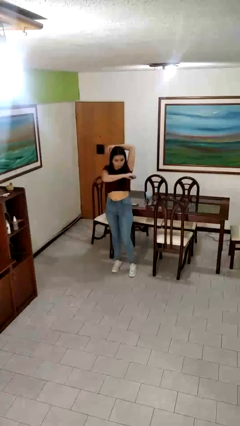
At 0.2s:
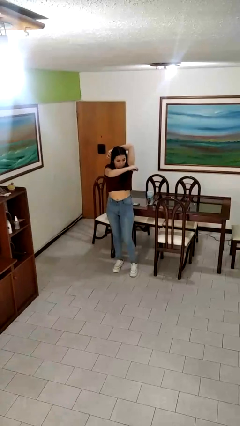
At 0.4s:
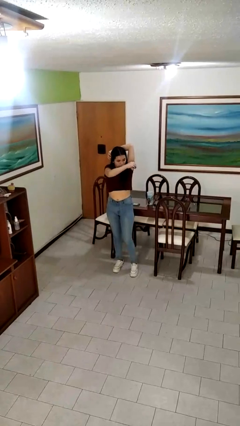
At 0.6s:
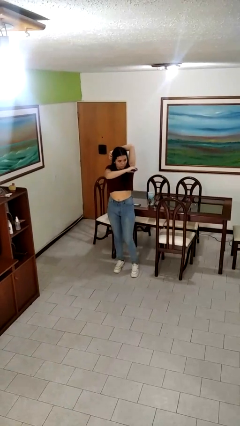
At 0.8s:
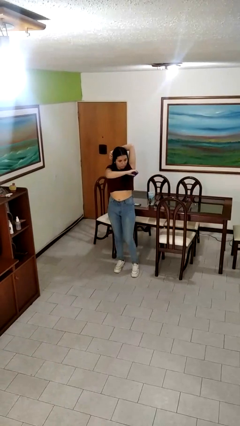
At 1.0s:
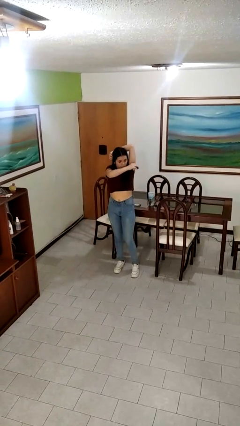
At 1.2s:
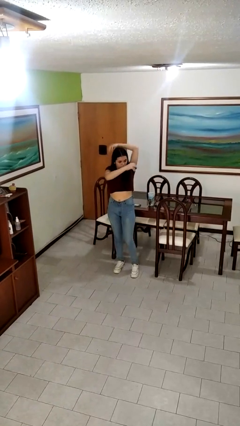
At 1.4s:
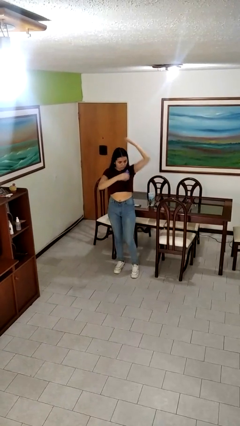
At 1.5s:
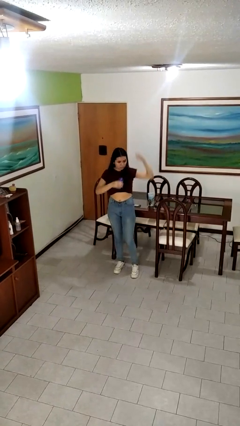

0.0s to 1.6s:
person applies deodorant

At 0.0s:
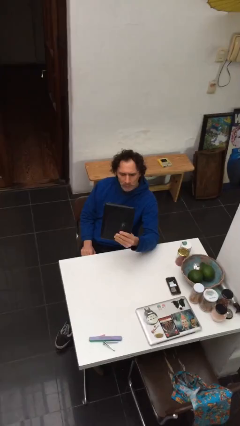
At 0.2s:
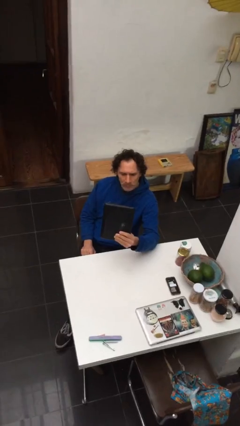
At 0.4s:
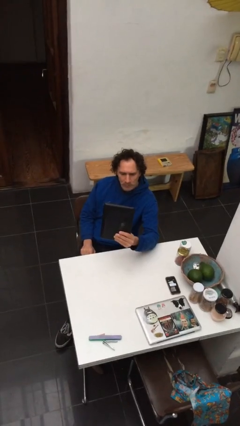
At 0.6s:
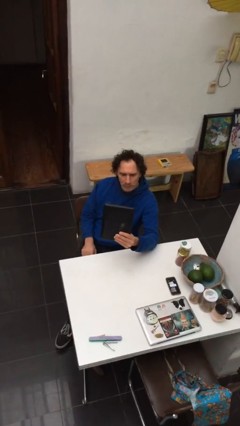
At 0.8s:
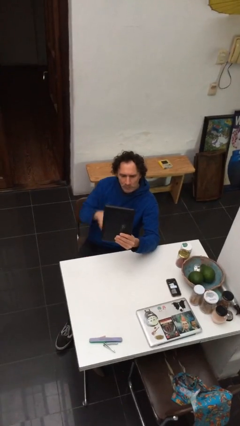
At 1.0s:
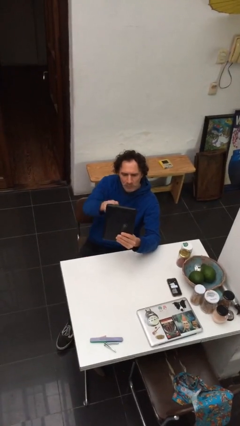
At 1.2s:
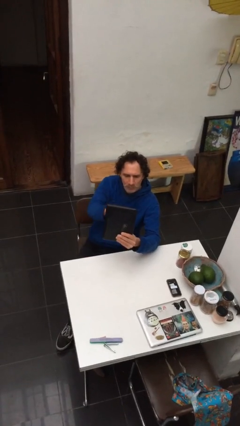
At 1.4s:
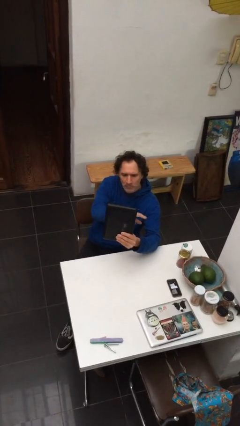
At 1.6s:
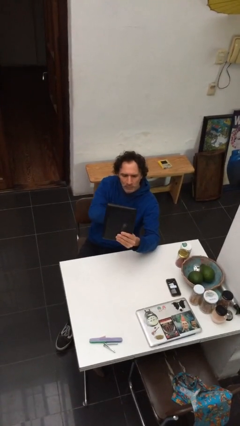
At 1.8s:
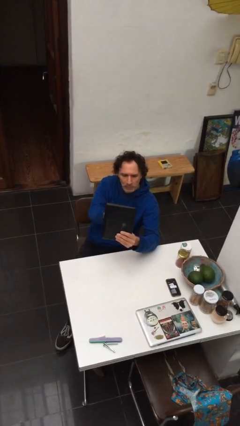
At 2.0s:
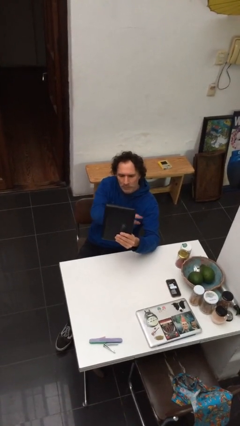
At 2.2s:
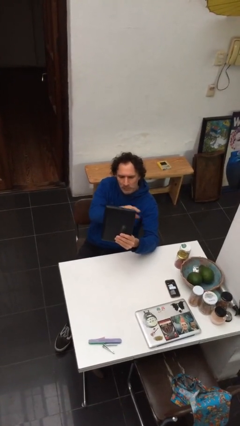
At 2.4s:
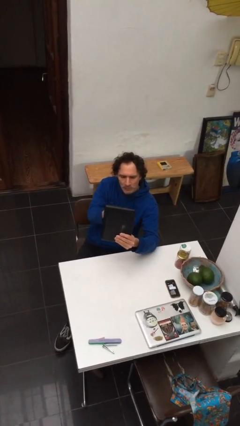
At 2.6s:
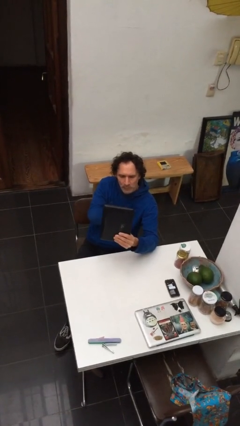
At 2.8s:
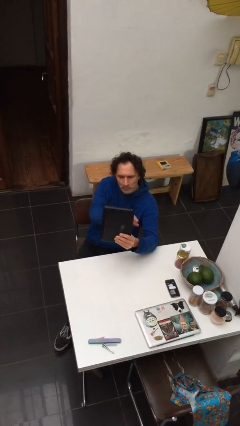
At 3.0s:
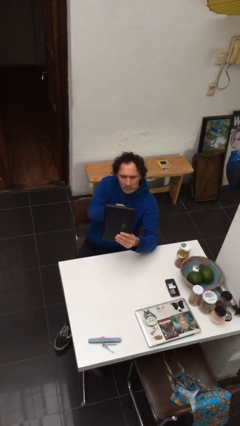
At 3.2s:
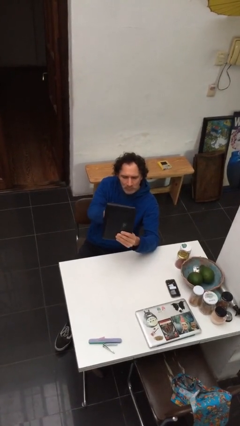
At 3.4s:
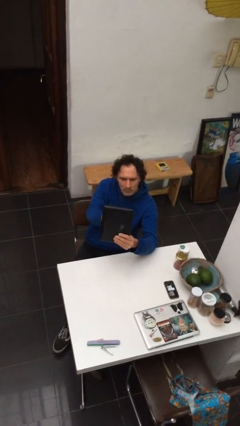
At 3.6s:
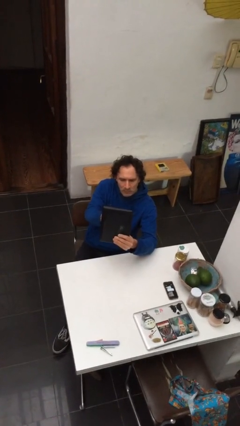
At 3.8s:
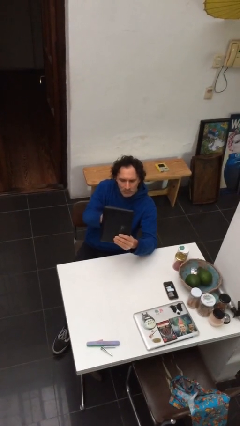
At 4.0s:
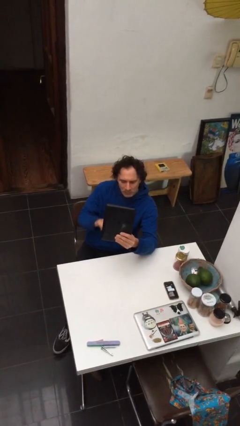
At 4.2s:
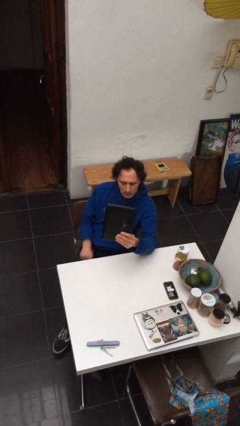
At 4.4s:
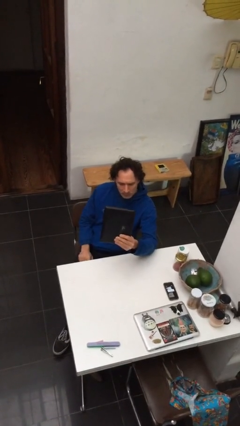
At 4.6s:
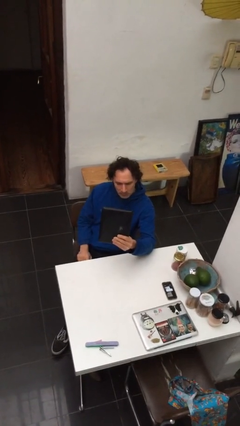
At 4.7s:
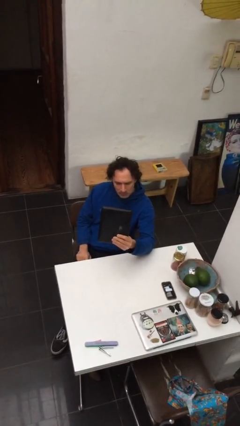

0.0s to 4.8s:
person interacts with tablet

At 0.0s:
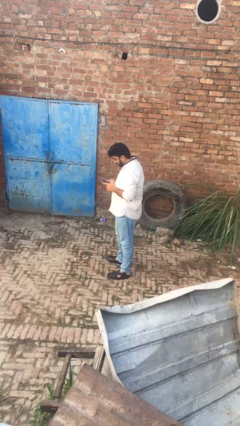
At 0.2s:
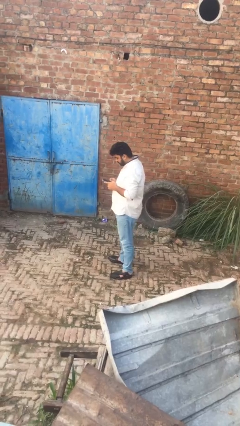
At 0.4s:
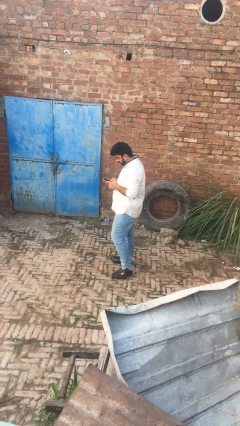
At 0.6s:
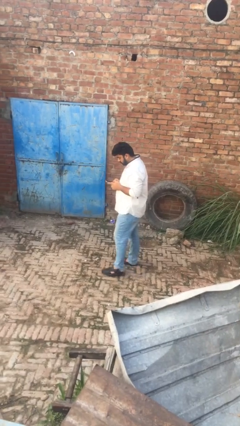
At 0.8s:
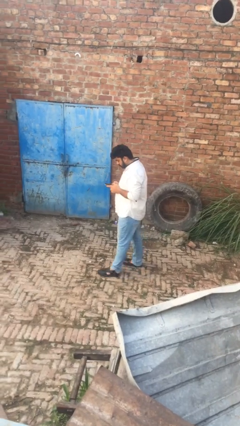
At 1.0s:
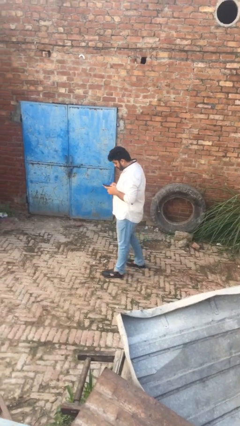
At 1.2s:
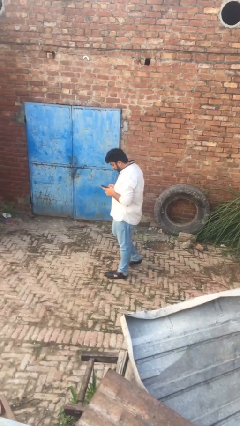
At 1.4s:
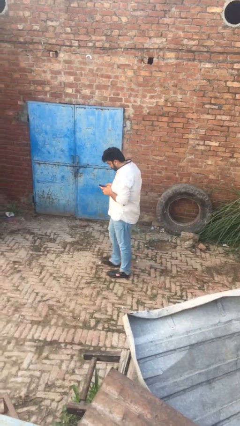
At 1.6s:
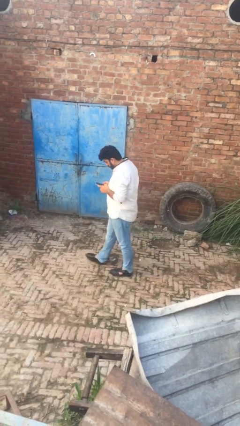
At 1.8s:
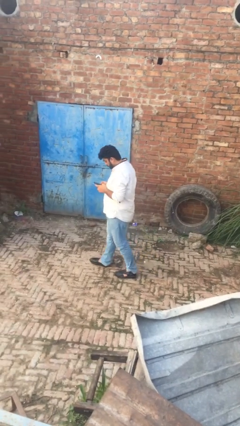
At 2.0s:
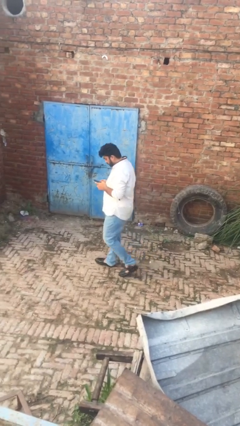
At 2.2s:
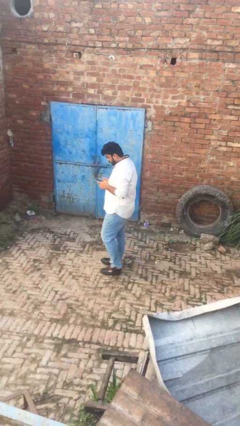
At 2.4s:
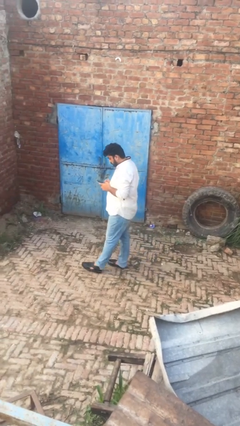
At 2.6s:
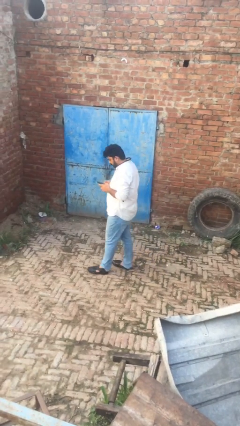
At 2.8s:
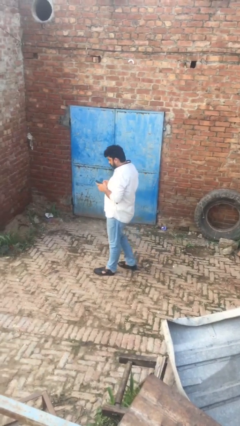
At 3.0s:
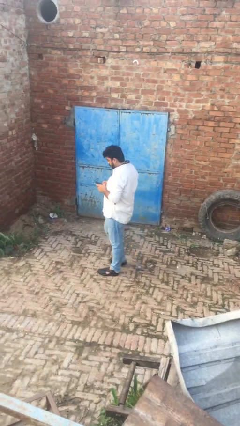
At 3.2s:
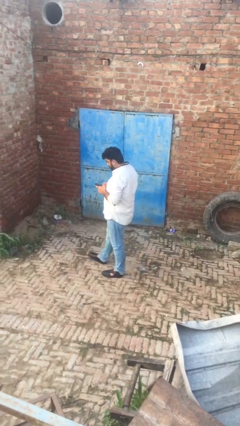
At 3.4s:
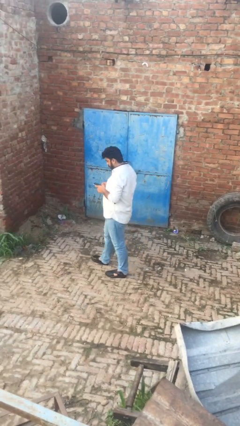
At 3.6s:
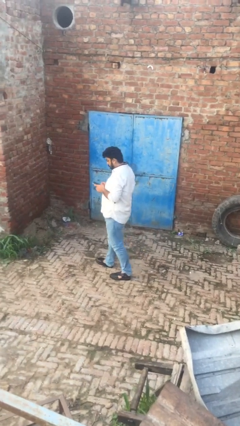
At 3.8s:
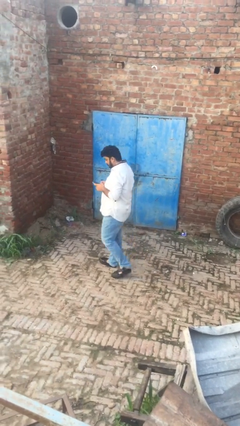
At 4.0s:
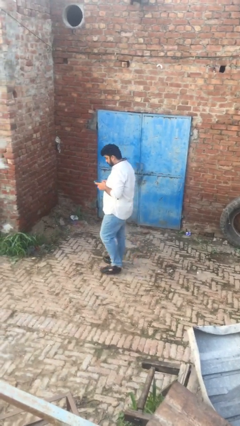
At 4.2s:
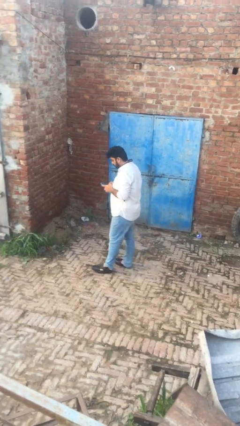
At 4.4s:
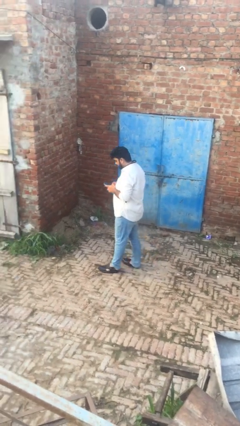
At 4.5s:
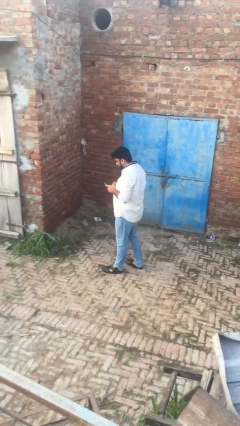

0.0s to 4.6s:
person texts on phone

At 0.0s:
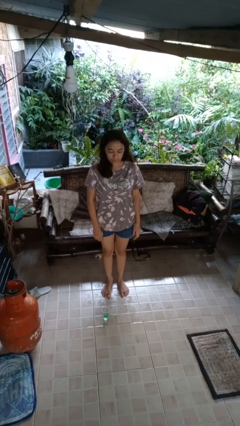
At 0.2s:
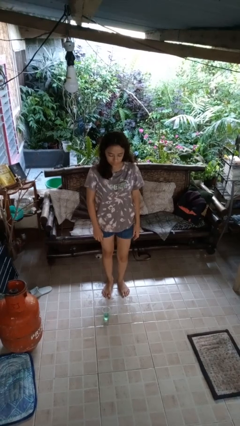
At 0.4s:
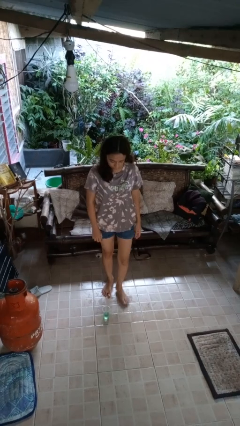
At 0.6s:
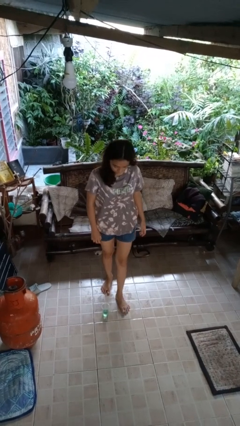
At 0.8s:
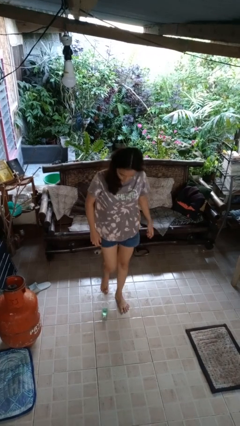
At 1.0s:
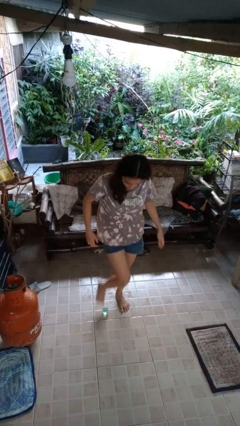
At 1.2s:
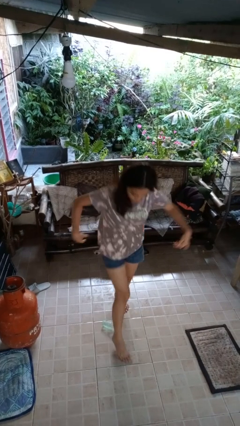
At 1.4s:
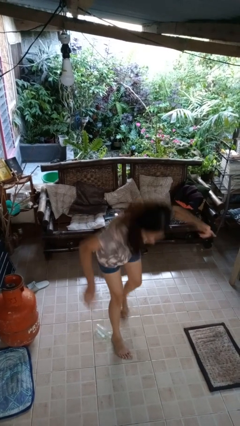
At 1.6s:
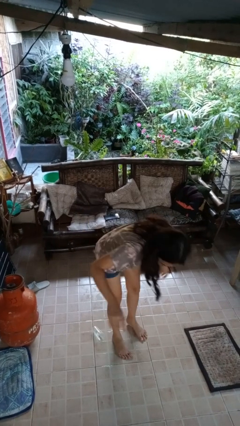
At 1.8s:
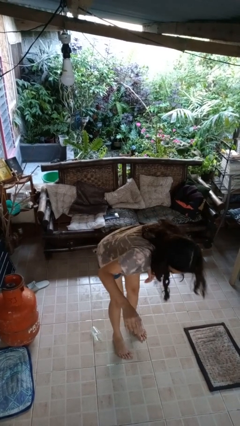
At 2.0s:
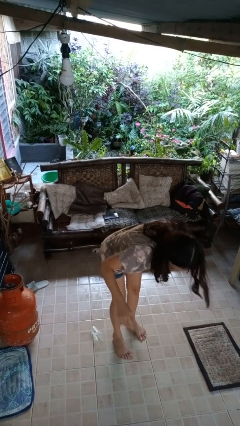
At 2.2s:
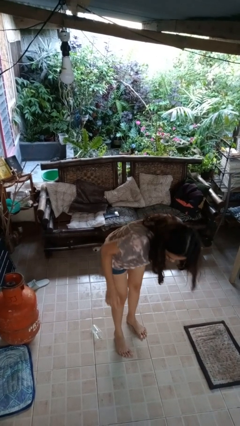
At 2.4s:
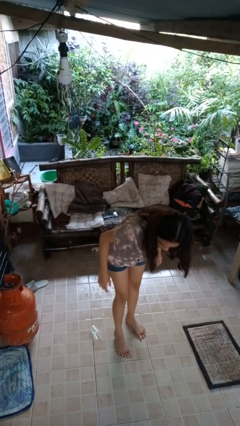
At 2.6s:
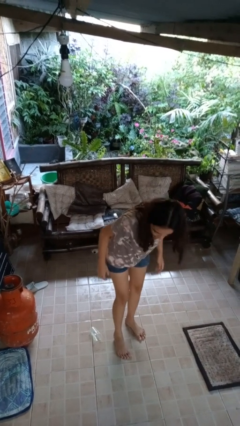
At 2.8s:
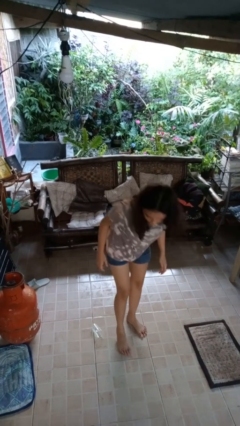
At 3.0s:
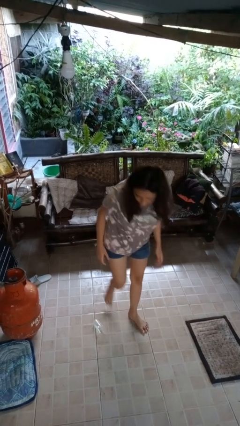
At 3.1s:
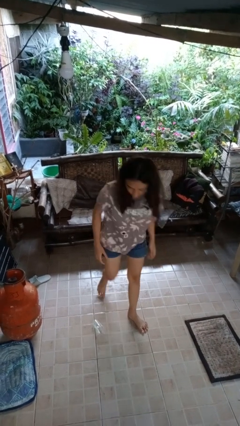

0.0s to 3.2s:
person spills on floor

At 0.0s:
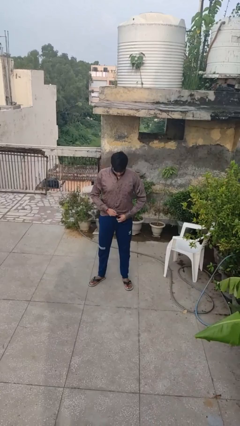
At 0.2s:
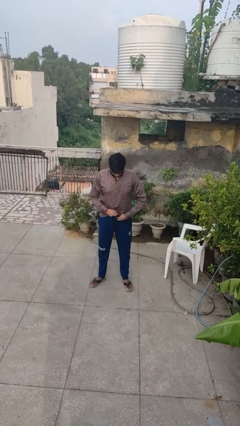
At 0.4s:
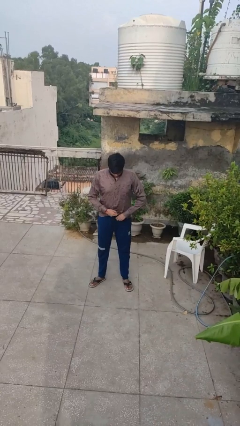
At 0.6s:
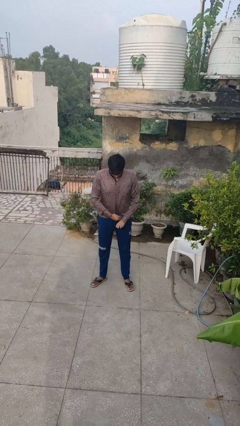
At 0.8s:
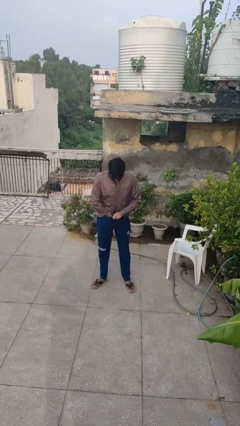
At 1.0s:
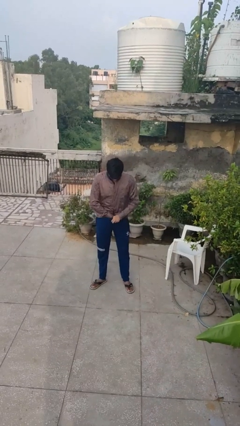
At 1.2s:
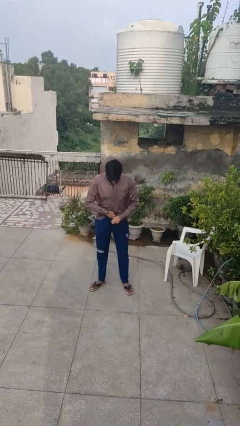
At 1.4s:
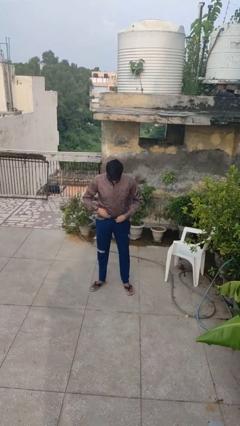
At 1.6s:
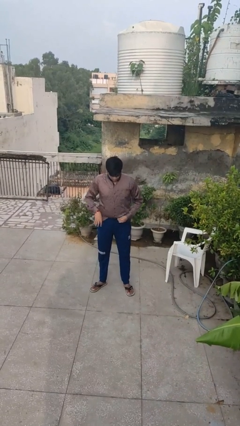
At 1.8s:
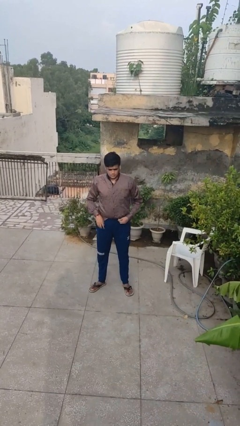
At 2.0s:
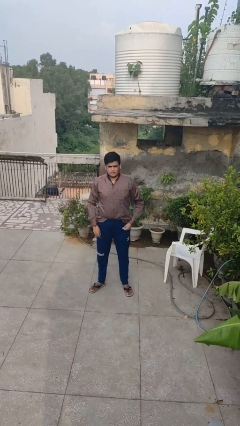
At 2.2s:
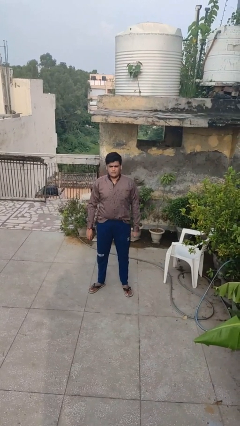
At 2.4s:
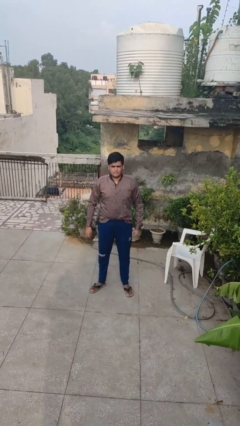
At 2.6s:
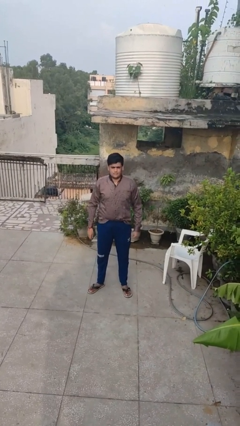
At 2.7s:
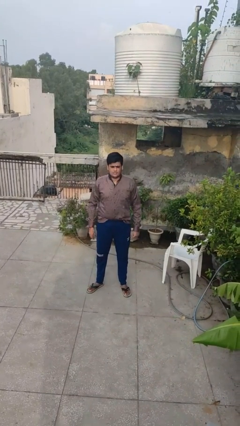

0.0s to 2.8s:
person tucks in shirt

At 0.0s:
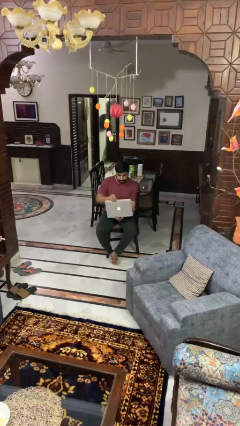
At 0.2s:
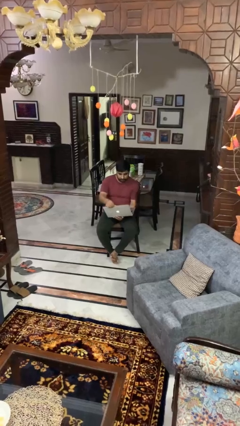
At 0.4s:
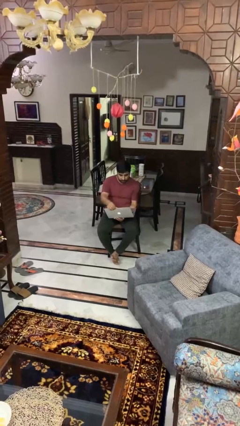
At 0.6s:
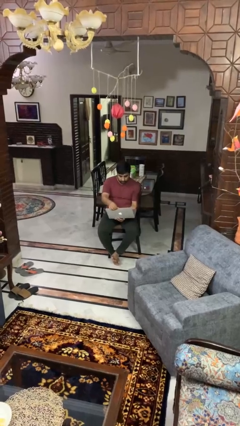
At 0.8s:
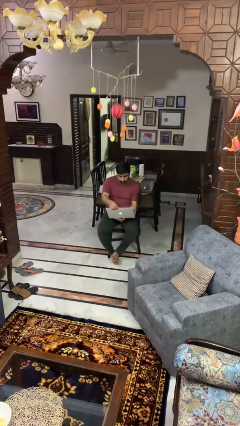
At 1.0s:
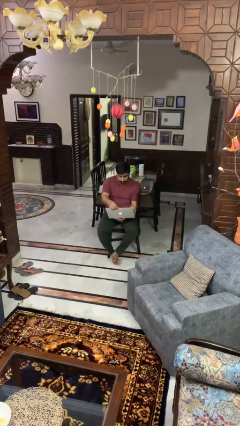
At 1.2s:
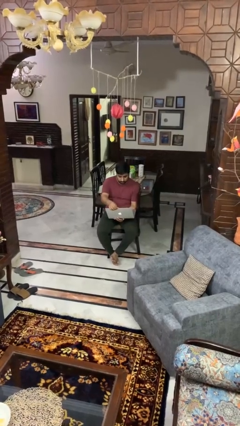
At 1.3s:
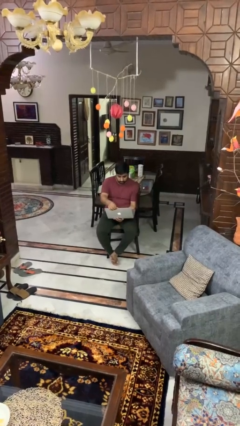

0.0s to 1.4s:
person opens laptop
